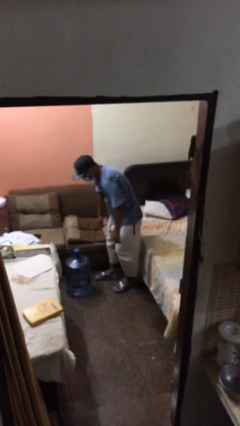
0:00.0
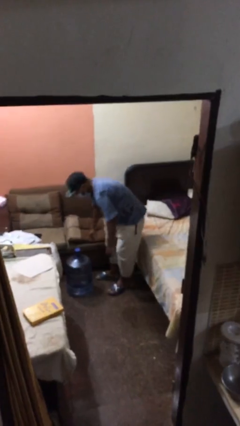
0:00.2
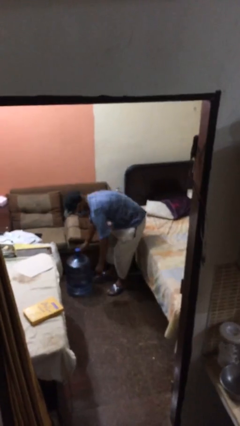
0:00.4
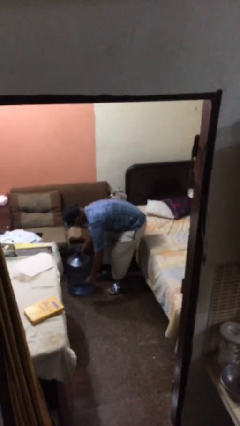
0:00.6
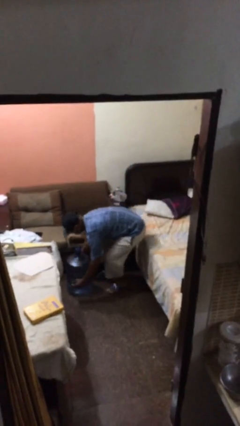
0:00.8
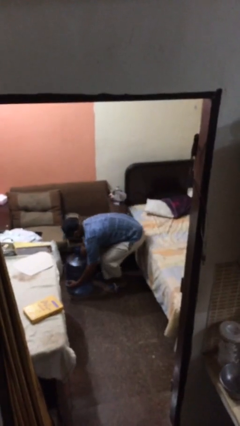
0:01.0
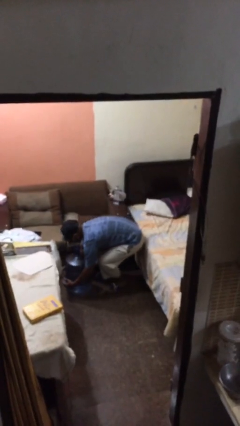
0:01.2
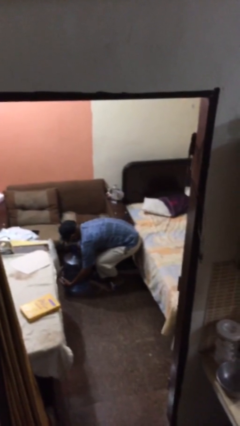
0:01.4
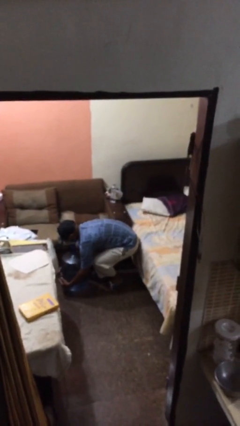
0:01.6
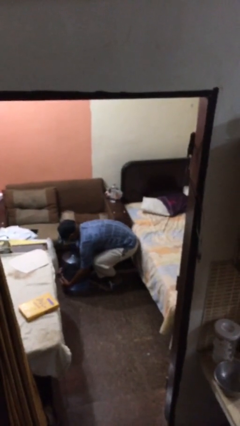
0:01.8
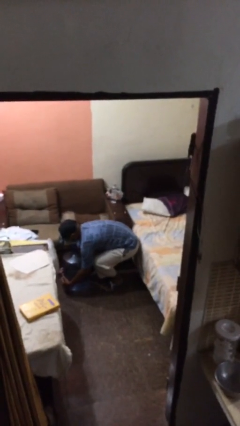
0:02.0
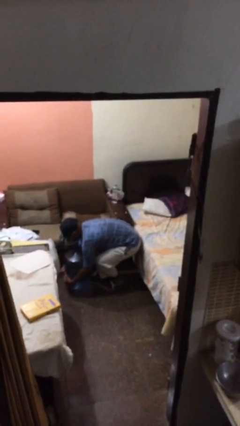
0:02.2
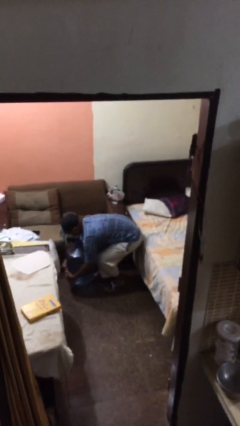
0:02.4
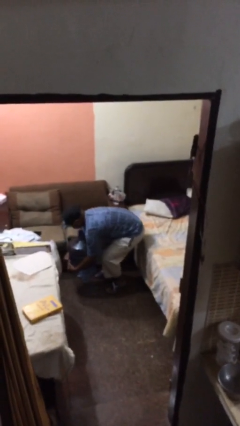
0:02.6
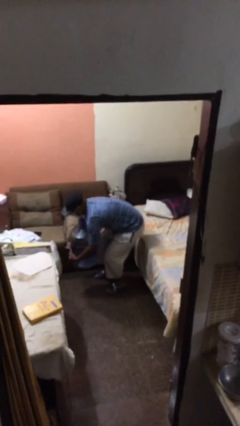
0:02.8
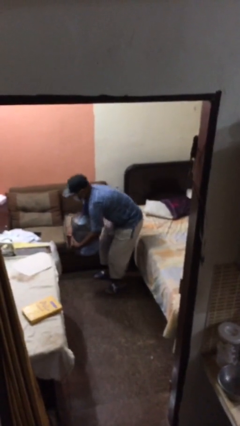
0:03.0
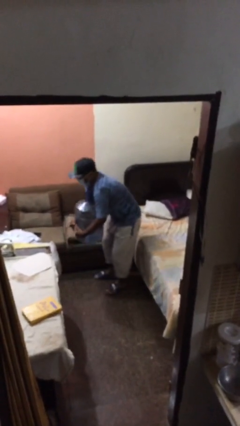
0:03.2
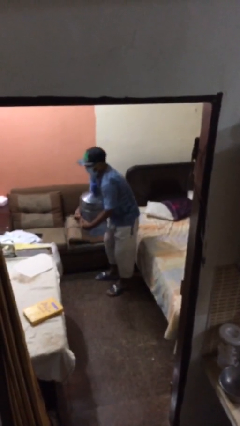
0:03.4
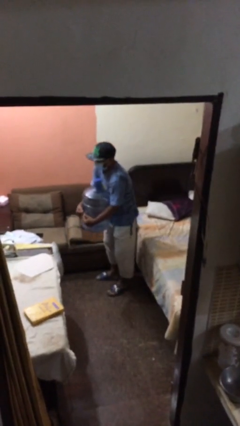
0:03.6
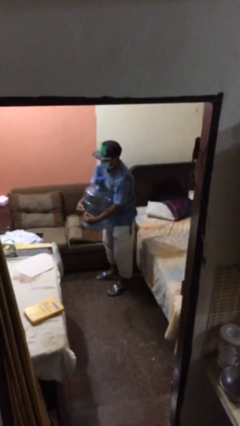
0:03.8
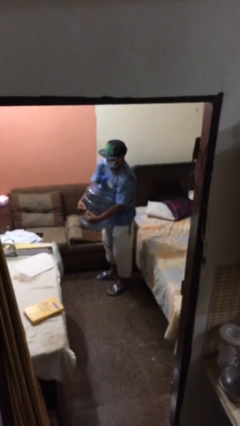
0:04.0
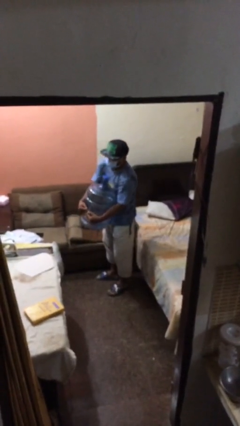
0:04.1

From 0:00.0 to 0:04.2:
person picks up object from floor

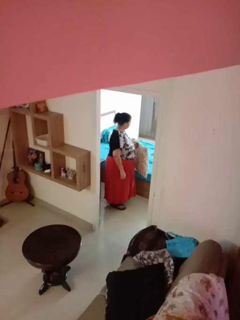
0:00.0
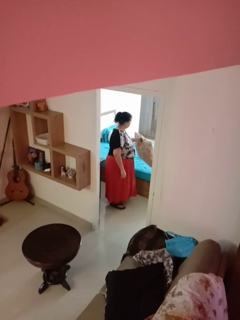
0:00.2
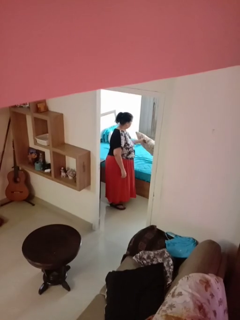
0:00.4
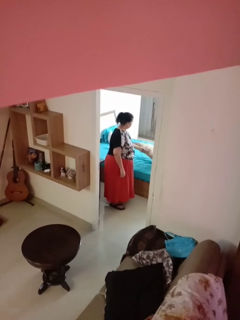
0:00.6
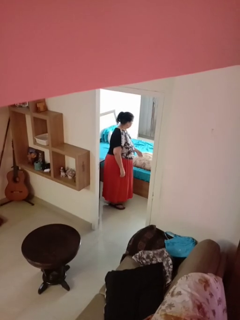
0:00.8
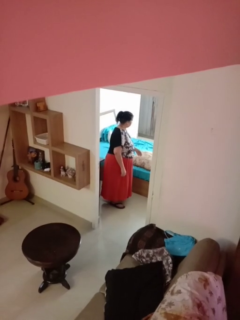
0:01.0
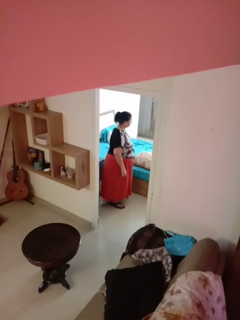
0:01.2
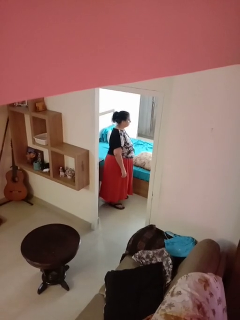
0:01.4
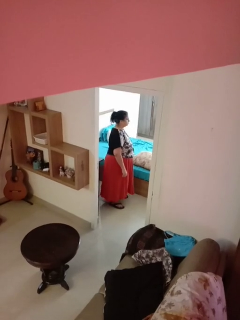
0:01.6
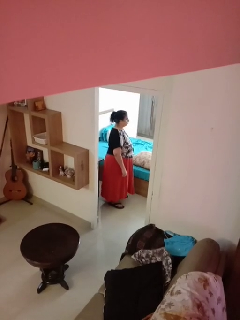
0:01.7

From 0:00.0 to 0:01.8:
person puts down object on bed

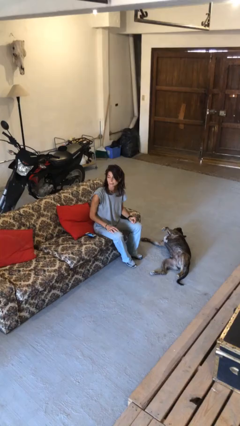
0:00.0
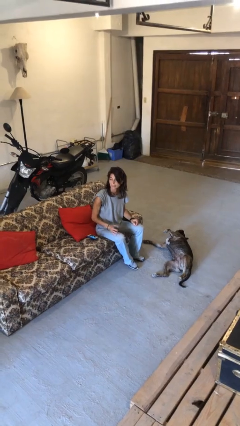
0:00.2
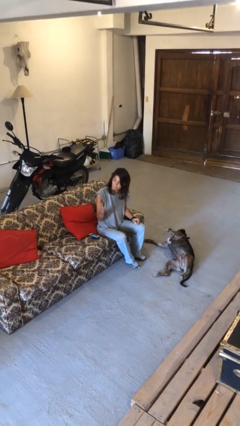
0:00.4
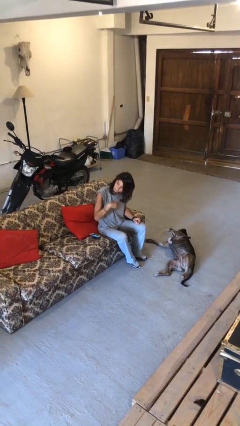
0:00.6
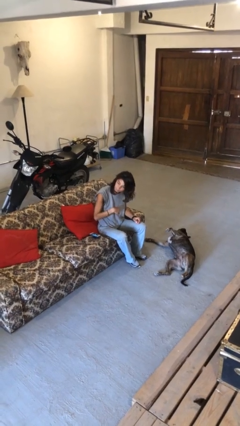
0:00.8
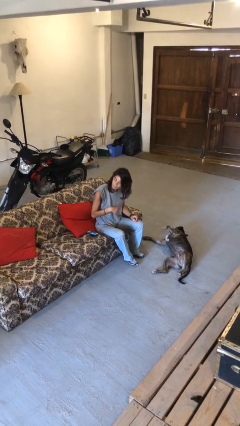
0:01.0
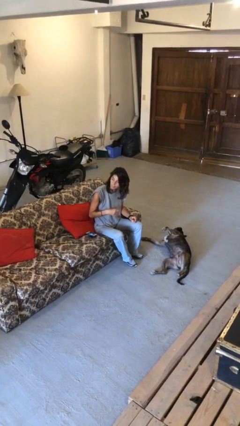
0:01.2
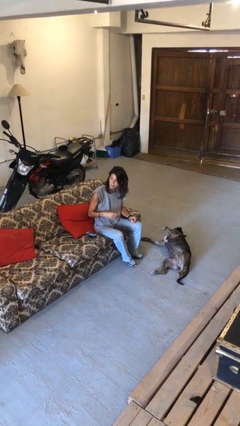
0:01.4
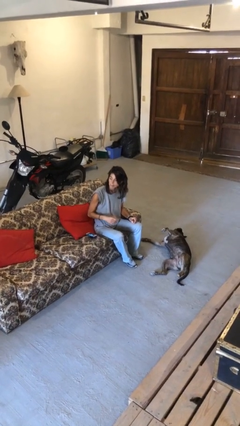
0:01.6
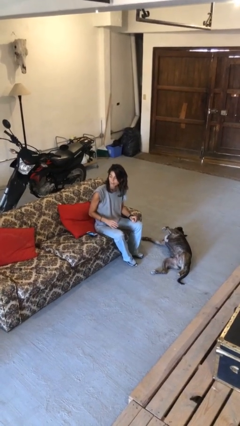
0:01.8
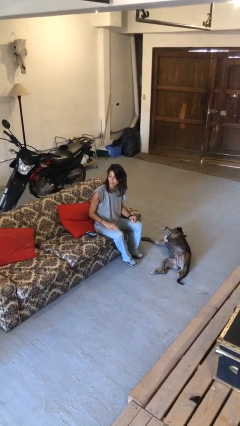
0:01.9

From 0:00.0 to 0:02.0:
person gestures come here

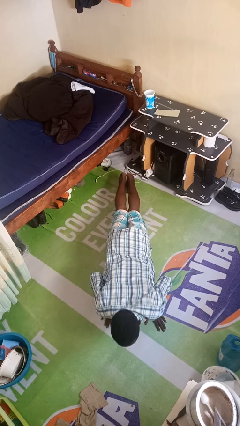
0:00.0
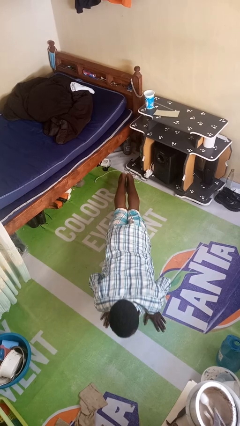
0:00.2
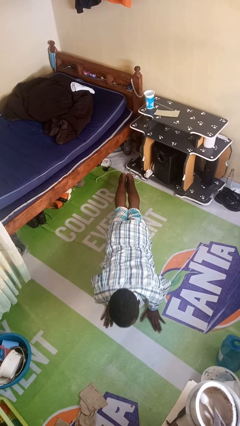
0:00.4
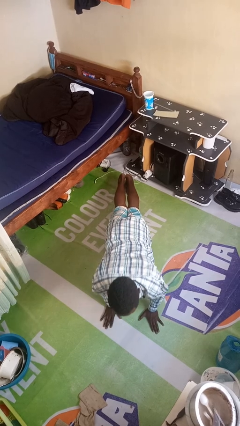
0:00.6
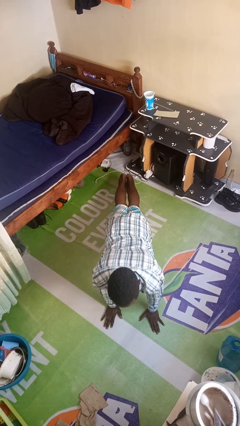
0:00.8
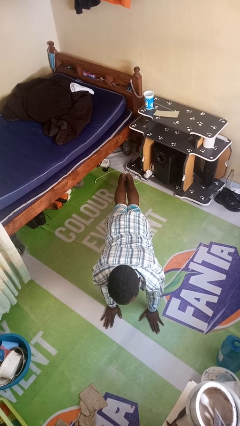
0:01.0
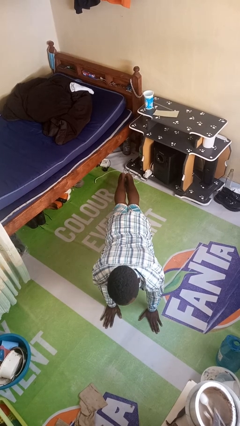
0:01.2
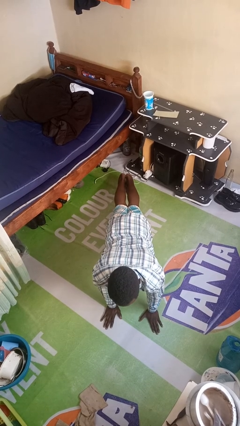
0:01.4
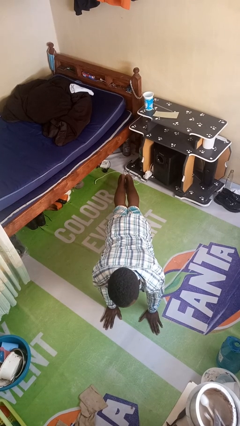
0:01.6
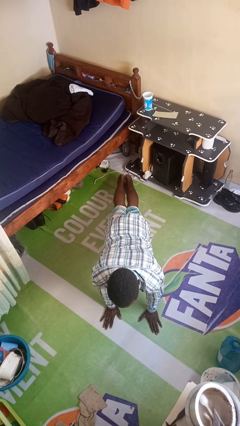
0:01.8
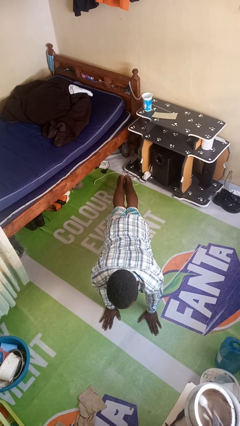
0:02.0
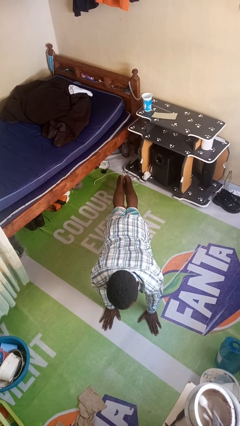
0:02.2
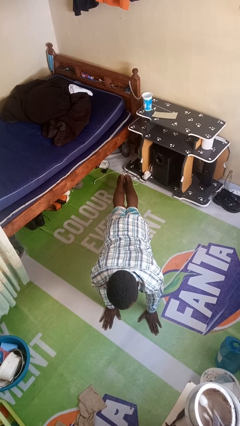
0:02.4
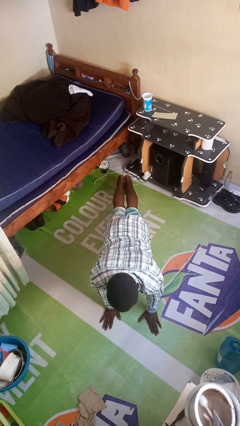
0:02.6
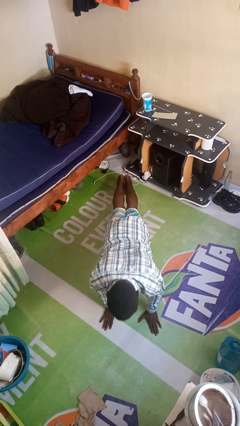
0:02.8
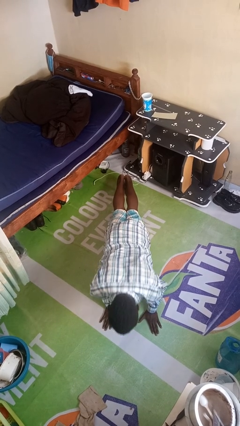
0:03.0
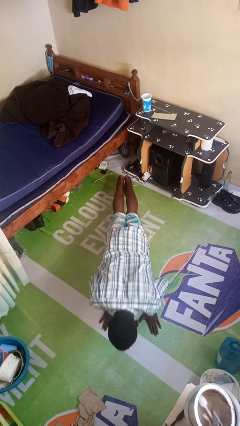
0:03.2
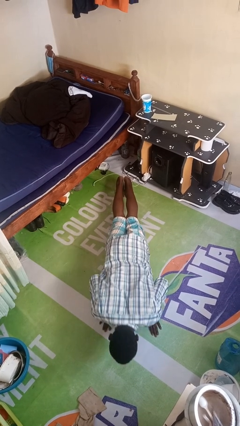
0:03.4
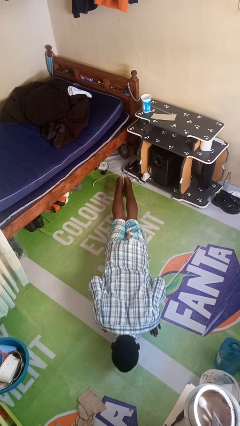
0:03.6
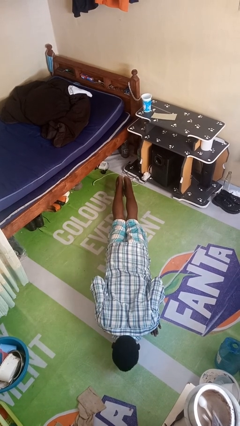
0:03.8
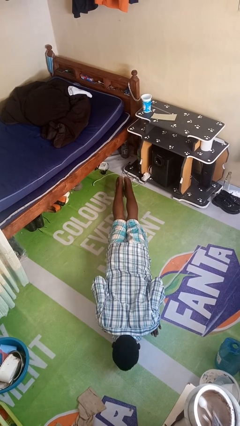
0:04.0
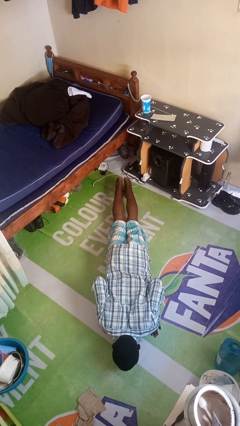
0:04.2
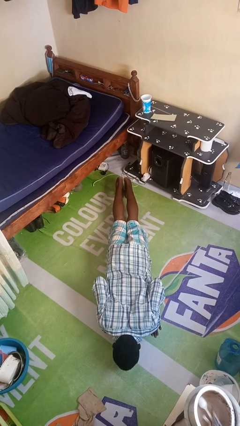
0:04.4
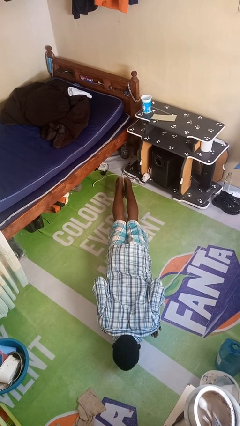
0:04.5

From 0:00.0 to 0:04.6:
person exercises with pushup

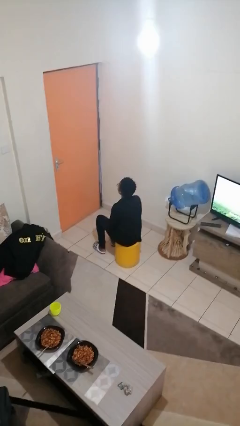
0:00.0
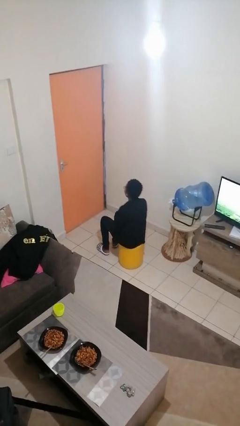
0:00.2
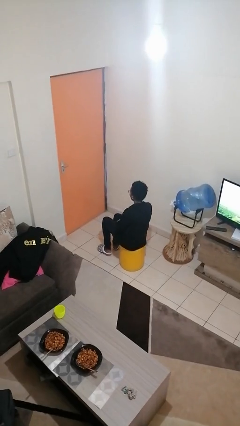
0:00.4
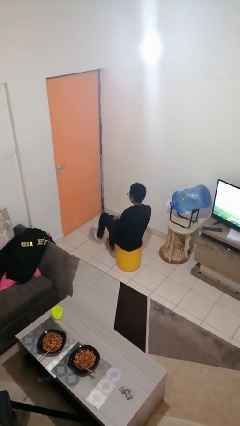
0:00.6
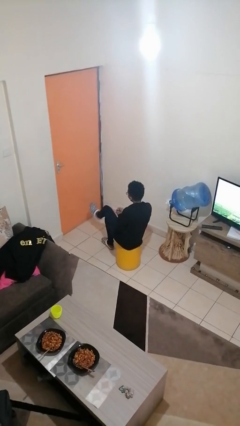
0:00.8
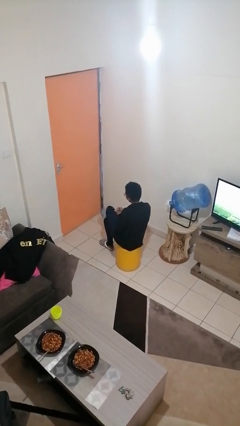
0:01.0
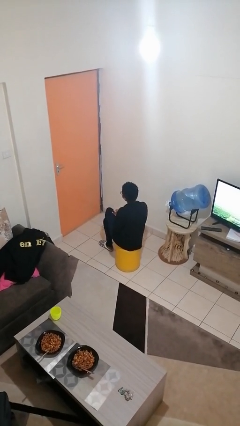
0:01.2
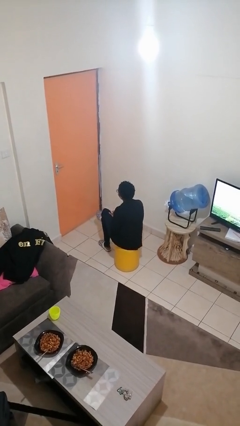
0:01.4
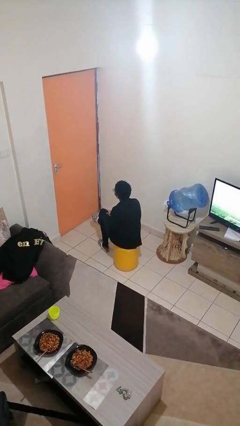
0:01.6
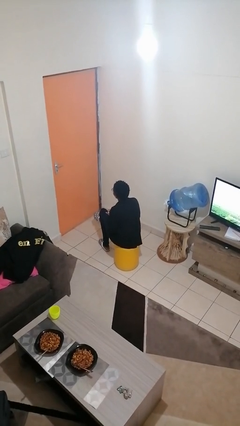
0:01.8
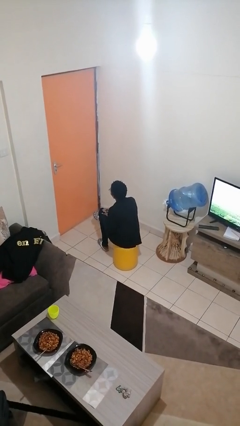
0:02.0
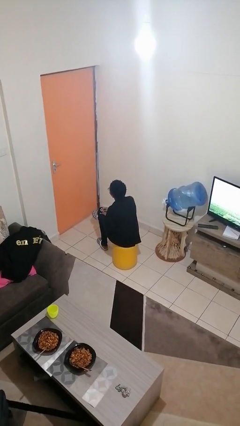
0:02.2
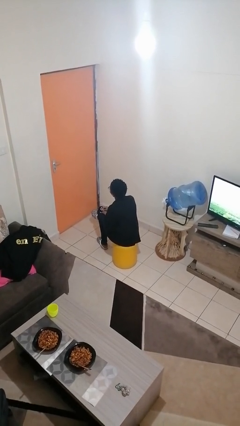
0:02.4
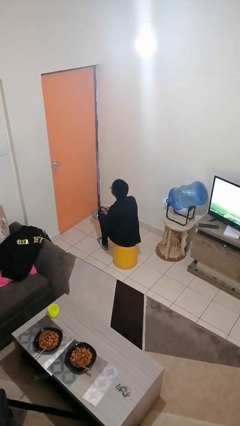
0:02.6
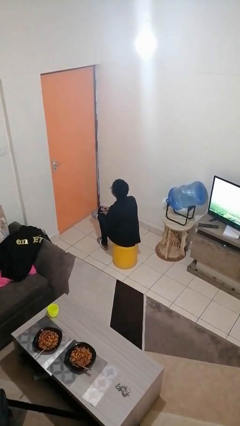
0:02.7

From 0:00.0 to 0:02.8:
person crosses legs

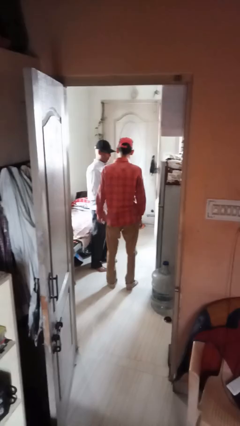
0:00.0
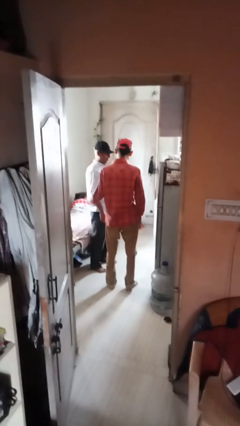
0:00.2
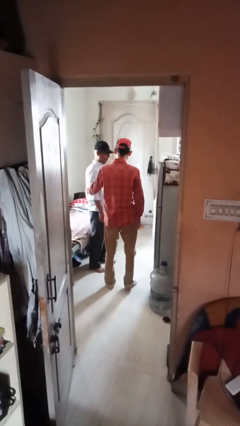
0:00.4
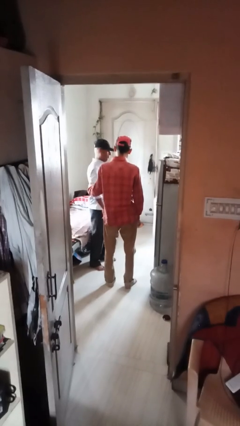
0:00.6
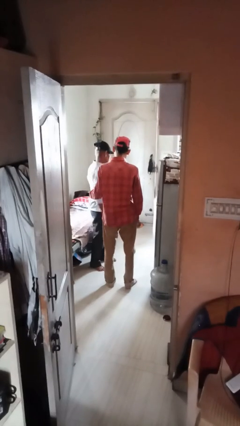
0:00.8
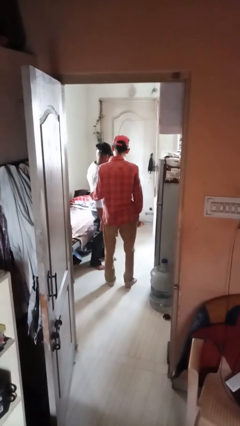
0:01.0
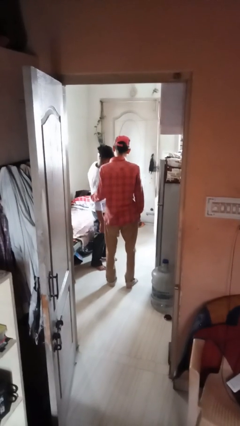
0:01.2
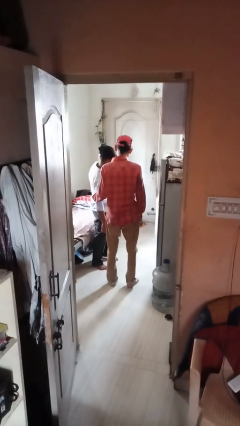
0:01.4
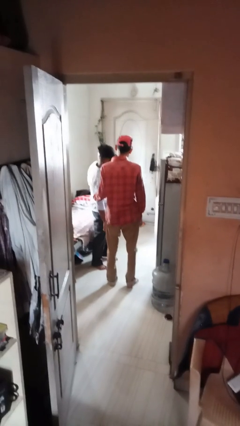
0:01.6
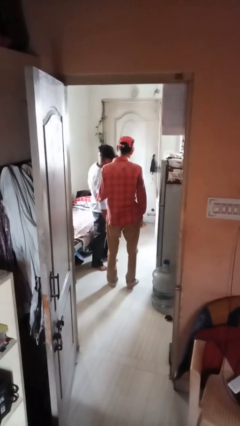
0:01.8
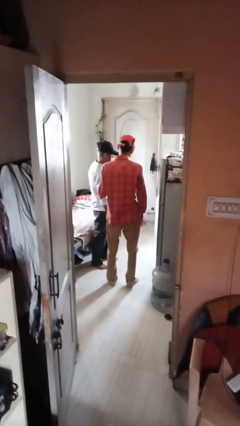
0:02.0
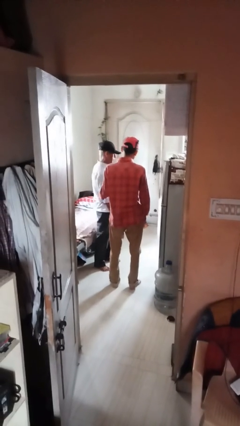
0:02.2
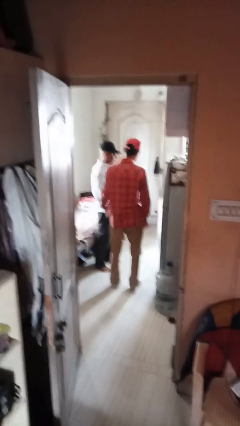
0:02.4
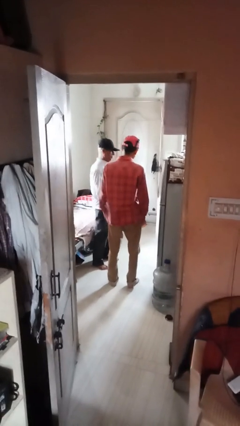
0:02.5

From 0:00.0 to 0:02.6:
person grabs person by bicep
